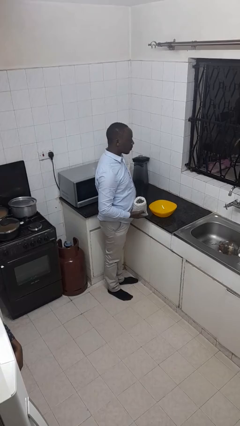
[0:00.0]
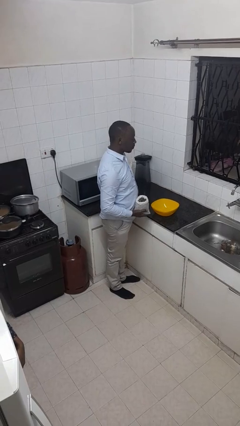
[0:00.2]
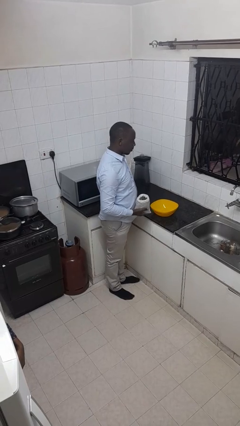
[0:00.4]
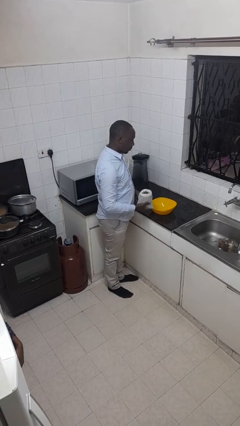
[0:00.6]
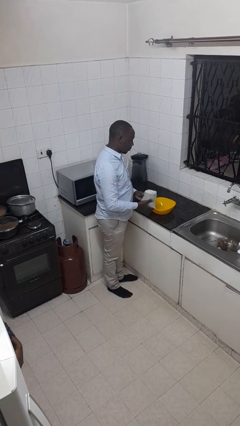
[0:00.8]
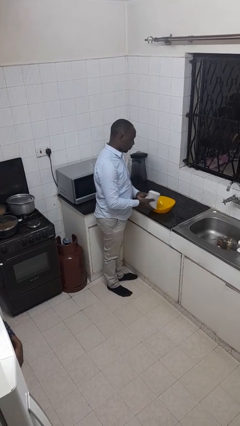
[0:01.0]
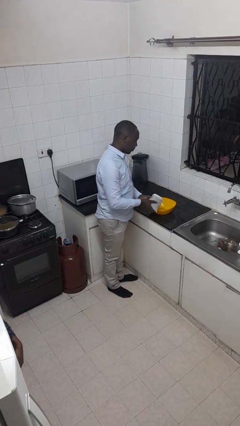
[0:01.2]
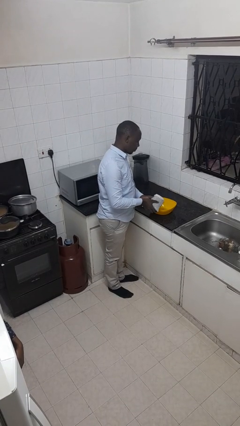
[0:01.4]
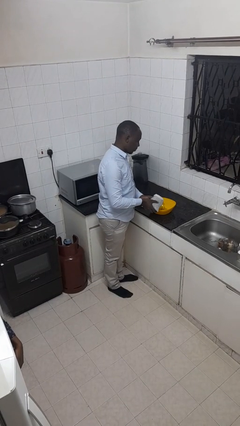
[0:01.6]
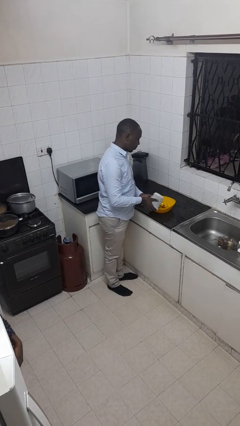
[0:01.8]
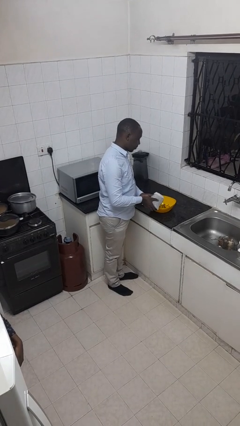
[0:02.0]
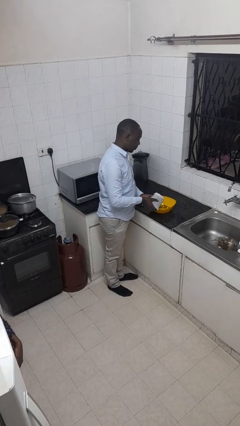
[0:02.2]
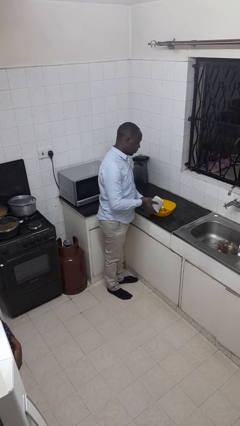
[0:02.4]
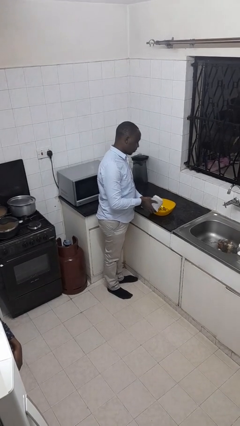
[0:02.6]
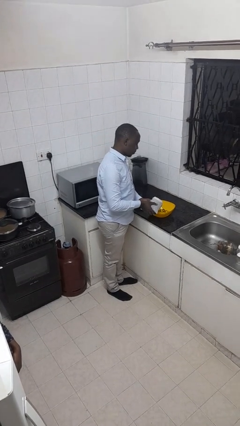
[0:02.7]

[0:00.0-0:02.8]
person pours into bowl

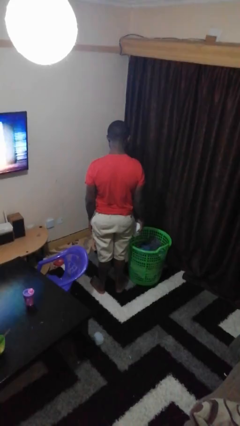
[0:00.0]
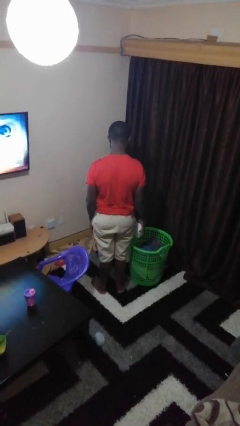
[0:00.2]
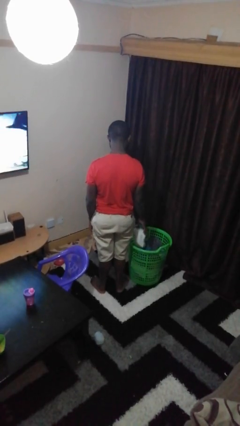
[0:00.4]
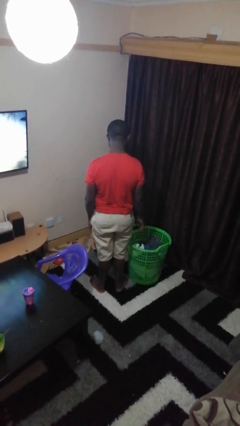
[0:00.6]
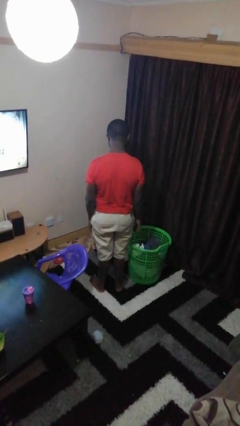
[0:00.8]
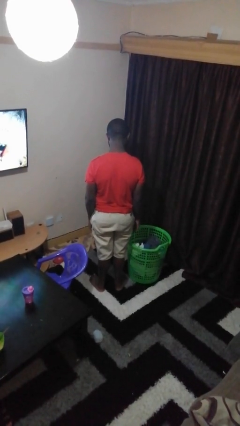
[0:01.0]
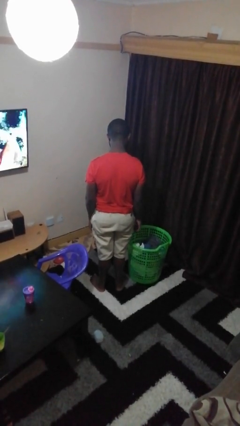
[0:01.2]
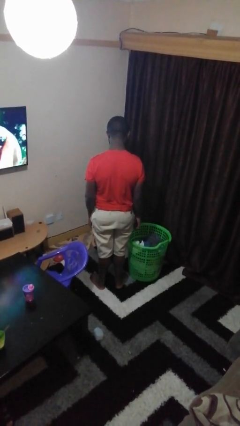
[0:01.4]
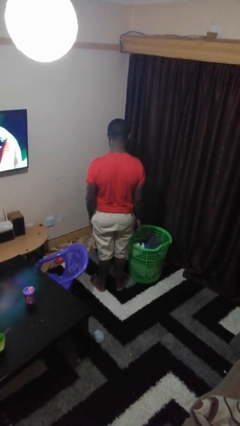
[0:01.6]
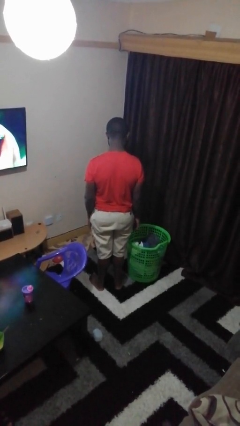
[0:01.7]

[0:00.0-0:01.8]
person puts object into basket

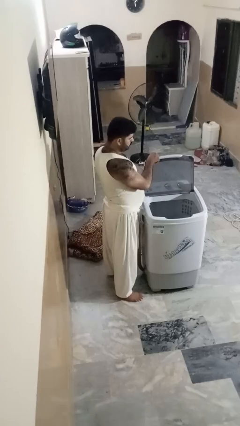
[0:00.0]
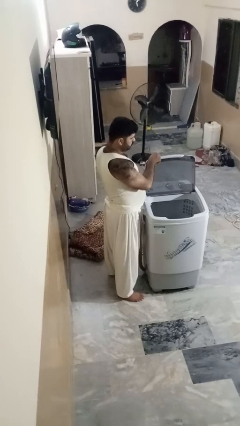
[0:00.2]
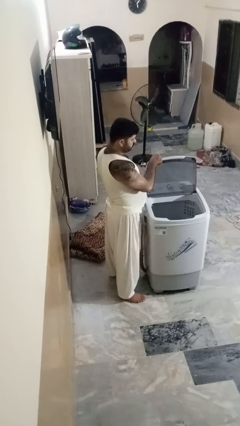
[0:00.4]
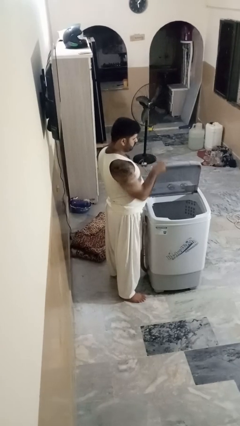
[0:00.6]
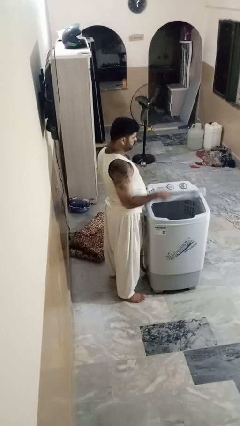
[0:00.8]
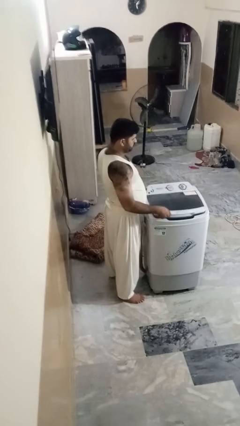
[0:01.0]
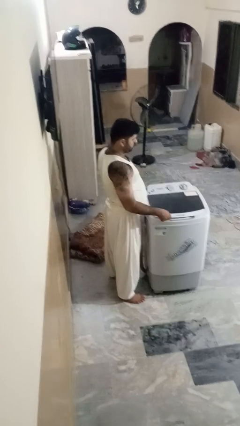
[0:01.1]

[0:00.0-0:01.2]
person closes clothes washer

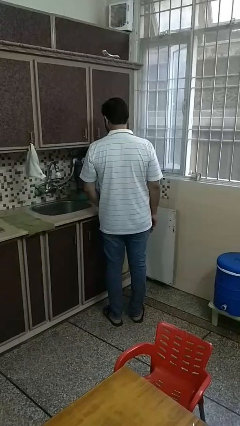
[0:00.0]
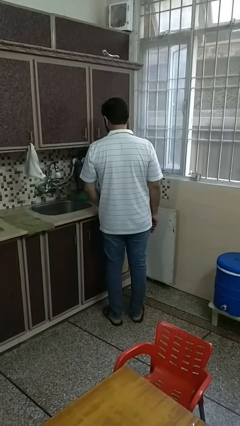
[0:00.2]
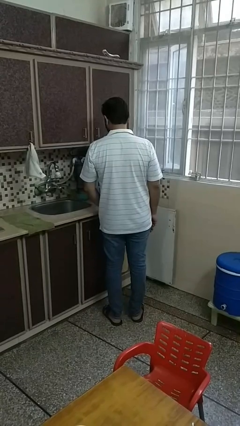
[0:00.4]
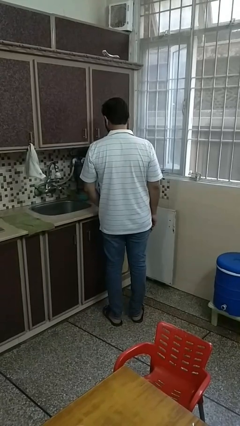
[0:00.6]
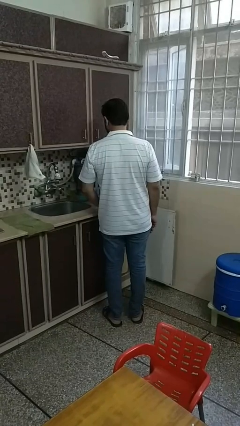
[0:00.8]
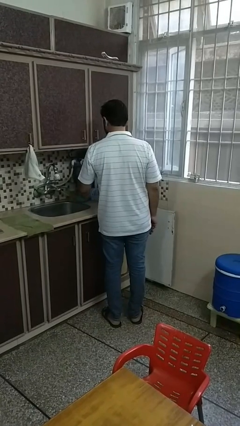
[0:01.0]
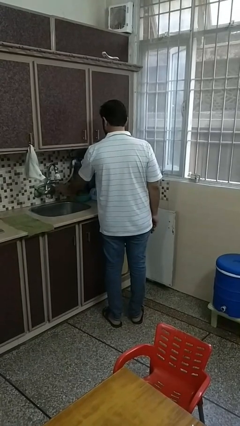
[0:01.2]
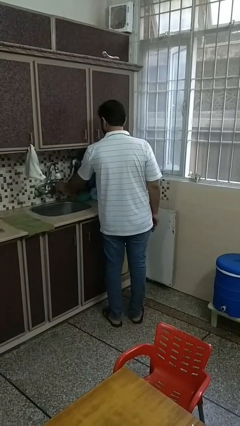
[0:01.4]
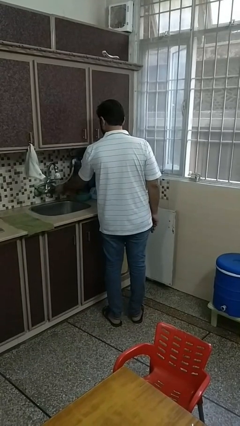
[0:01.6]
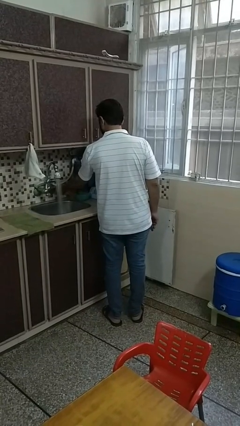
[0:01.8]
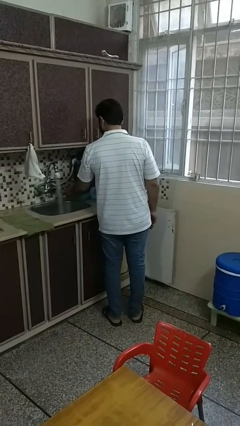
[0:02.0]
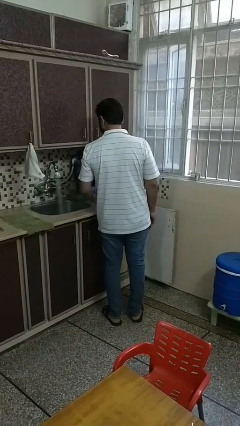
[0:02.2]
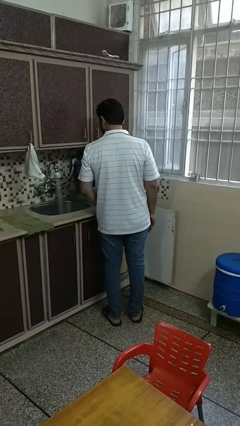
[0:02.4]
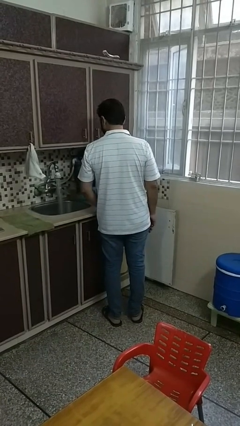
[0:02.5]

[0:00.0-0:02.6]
person turns on faucet

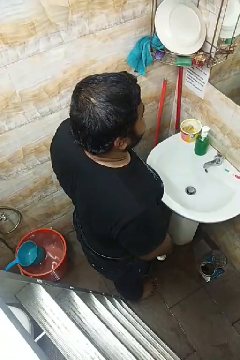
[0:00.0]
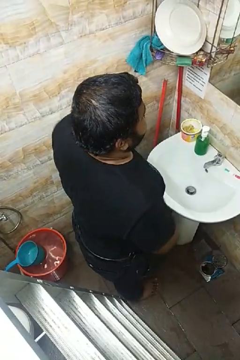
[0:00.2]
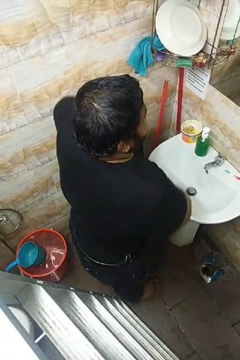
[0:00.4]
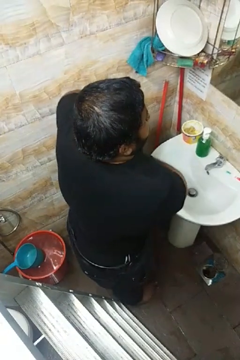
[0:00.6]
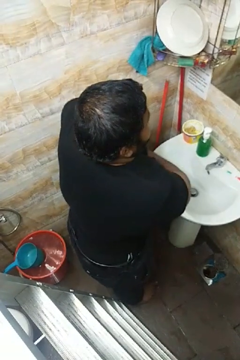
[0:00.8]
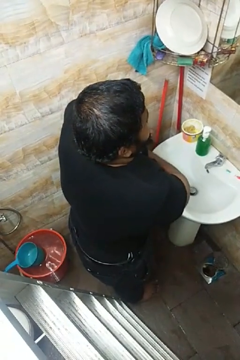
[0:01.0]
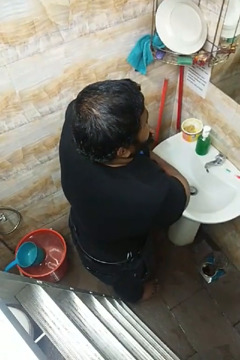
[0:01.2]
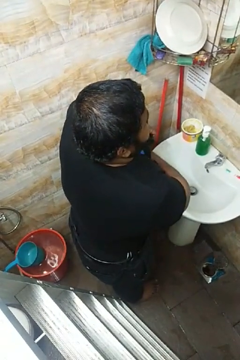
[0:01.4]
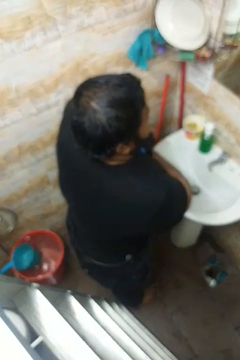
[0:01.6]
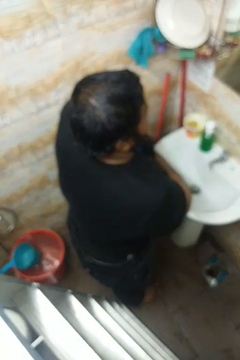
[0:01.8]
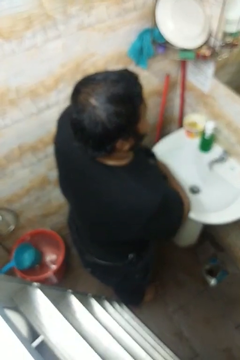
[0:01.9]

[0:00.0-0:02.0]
person applies deodorant

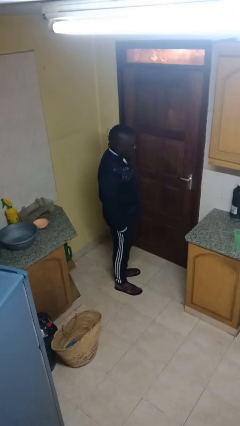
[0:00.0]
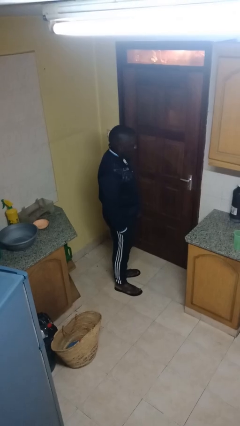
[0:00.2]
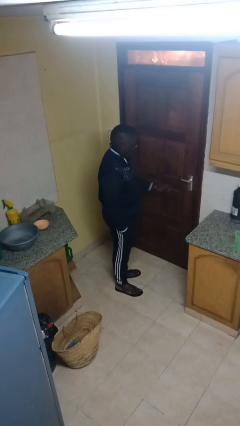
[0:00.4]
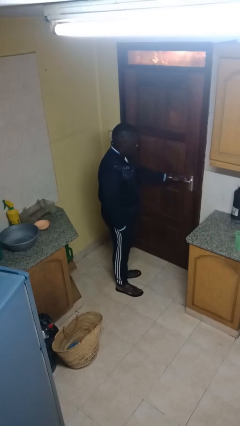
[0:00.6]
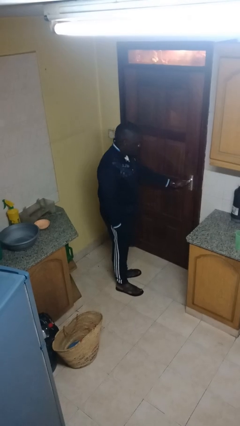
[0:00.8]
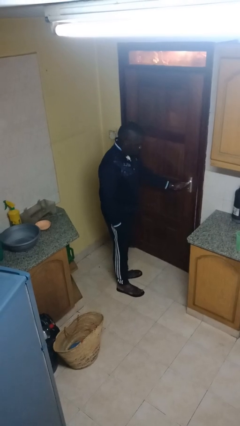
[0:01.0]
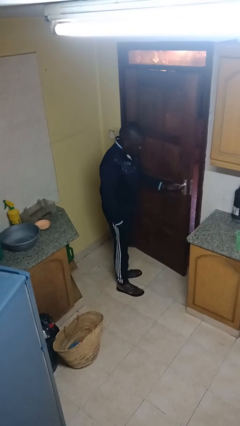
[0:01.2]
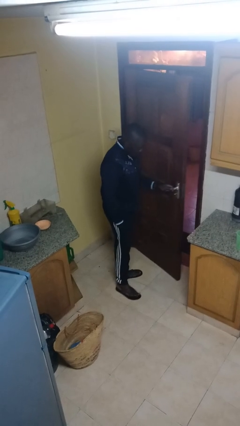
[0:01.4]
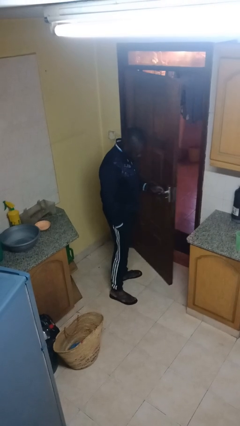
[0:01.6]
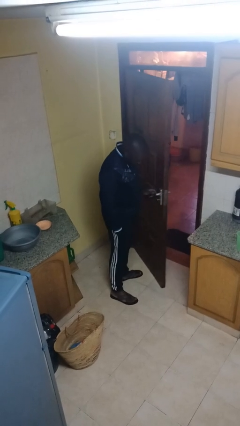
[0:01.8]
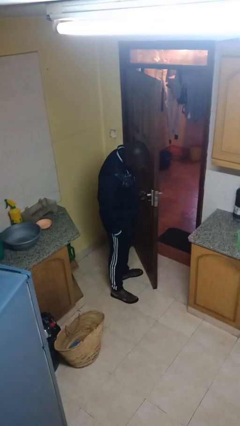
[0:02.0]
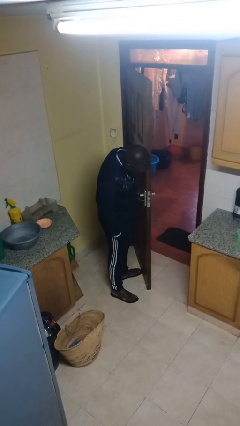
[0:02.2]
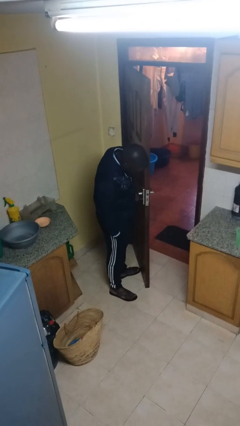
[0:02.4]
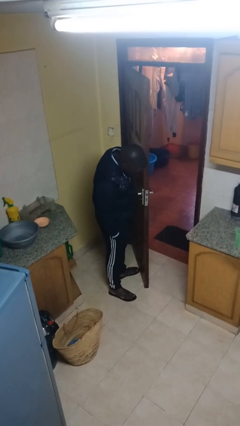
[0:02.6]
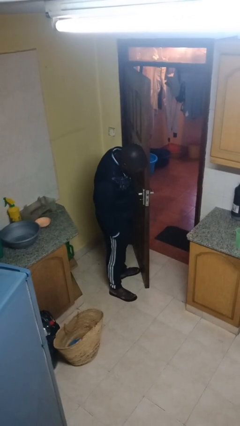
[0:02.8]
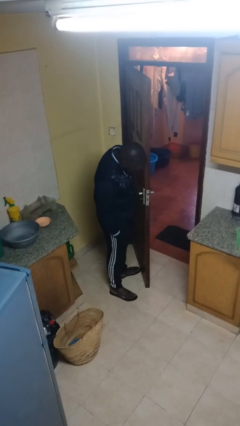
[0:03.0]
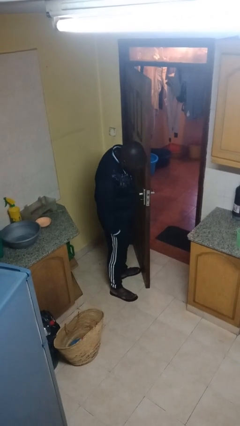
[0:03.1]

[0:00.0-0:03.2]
person opens facility door

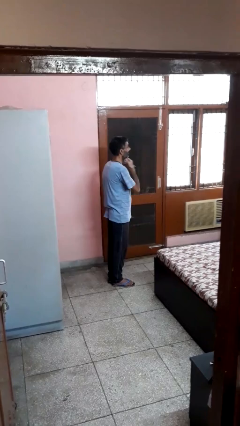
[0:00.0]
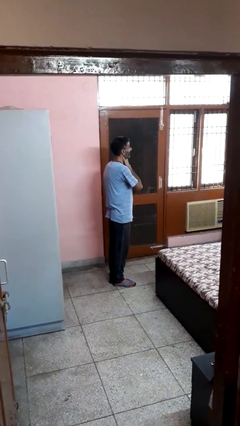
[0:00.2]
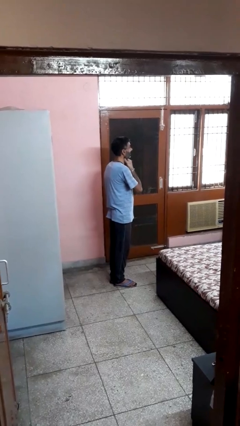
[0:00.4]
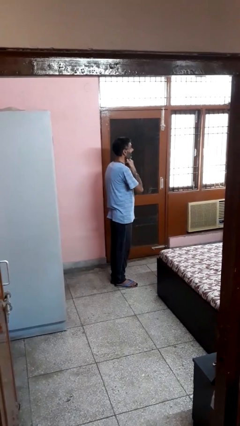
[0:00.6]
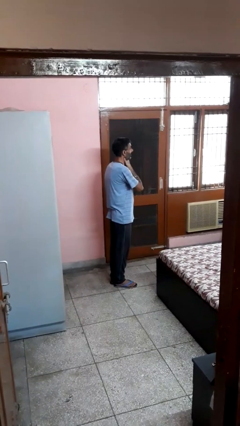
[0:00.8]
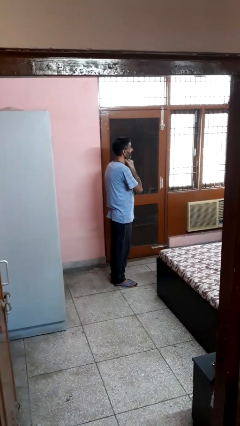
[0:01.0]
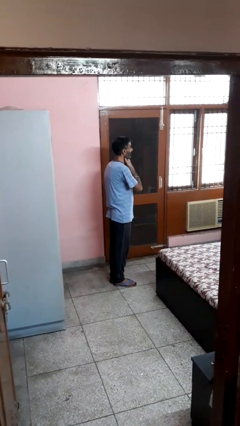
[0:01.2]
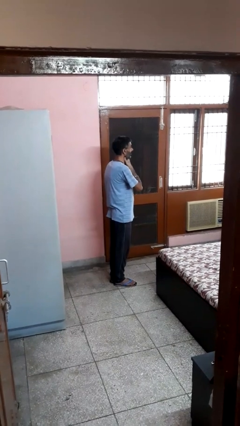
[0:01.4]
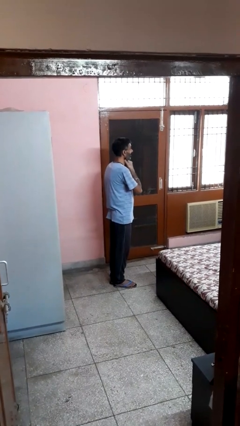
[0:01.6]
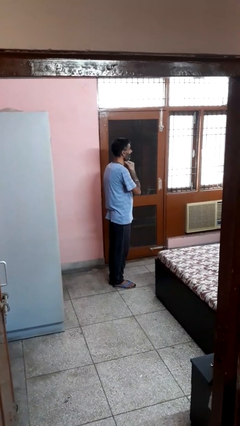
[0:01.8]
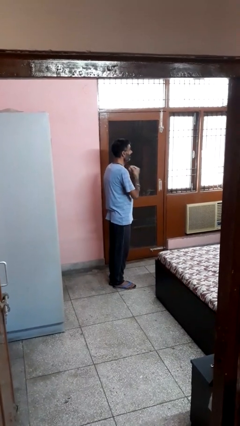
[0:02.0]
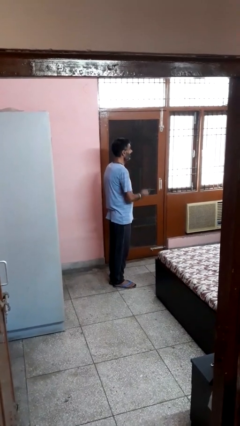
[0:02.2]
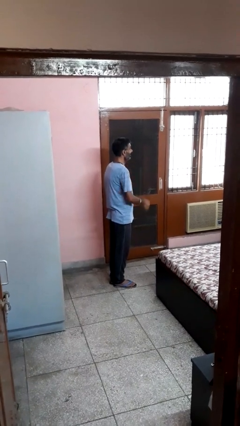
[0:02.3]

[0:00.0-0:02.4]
person rubs neck

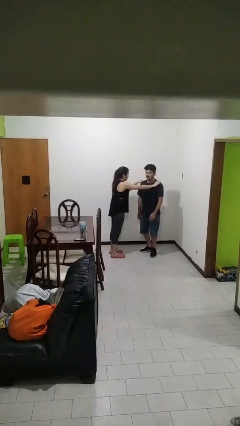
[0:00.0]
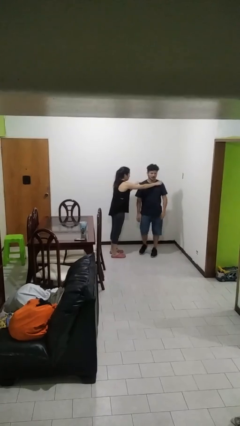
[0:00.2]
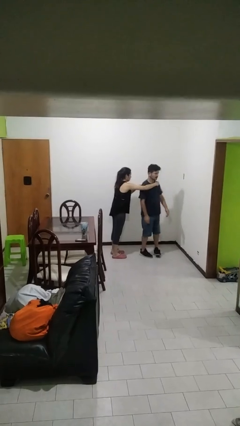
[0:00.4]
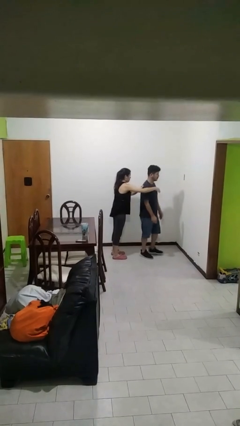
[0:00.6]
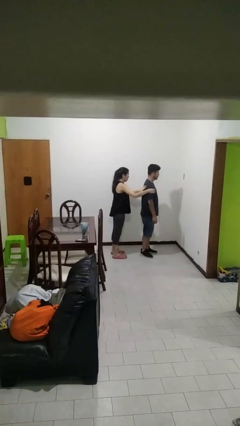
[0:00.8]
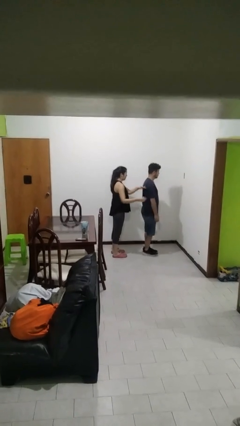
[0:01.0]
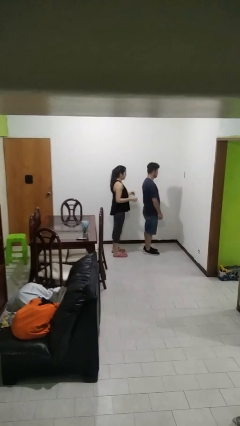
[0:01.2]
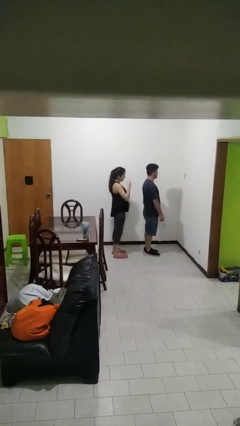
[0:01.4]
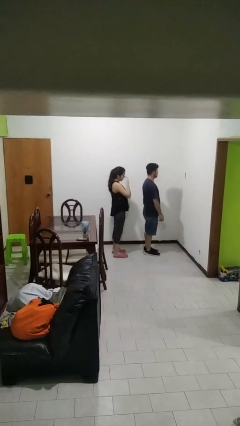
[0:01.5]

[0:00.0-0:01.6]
person spins person around
